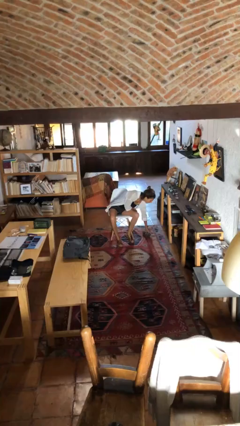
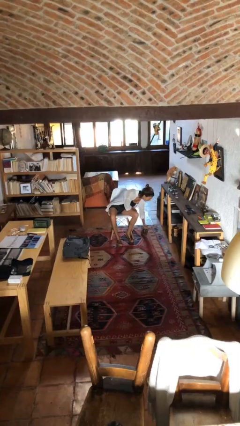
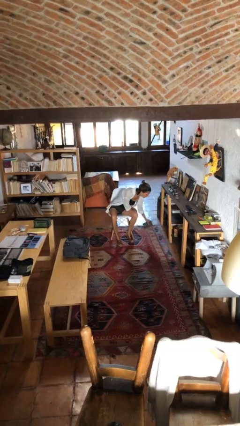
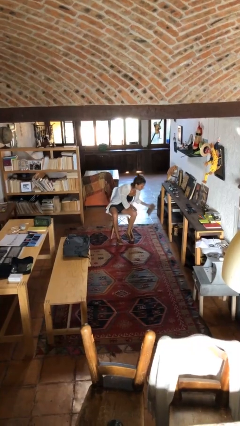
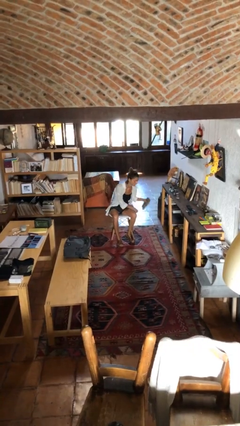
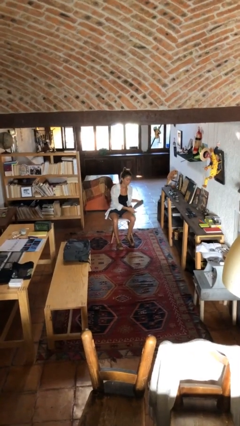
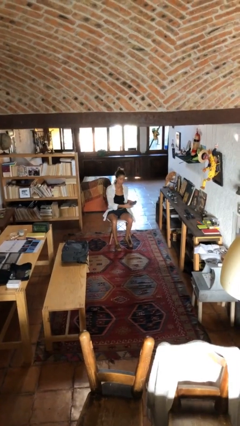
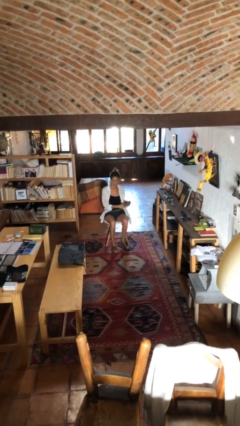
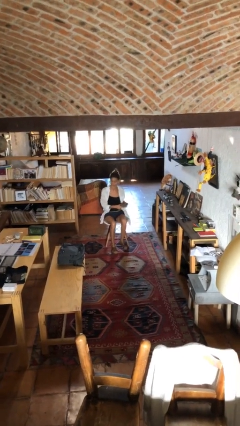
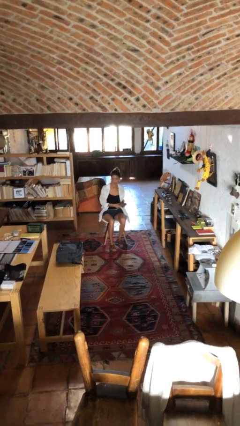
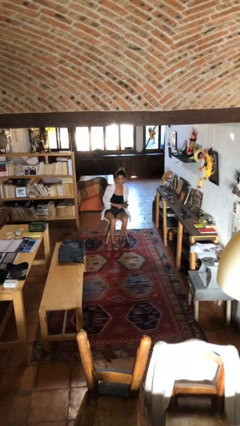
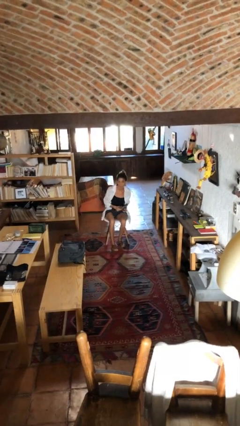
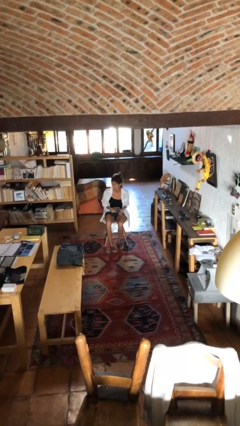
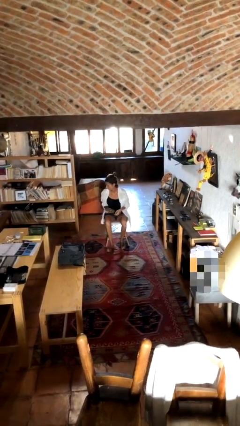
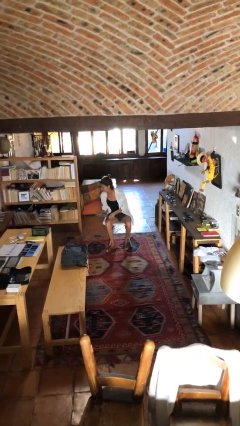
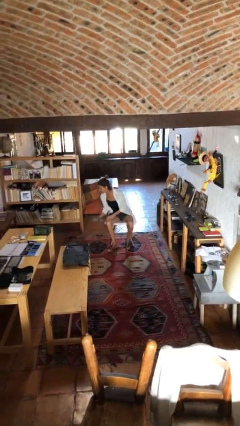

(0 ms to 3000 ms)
person picks up object from floor

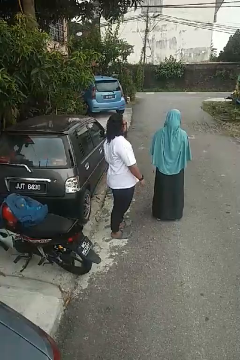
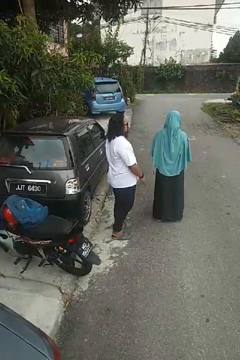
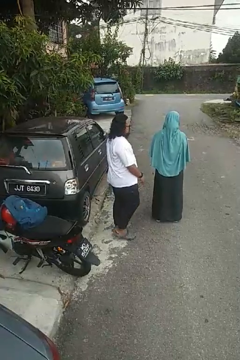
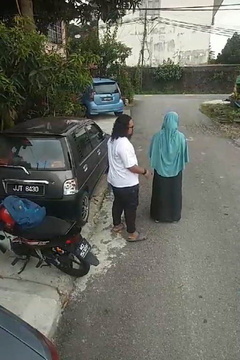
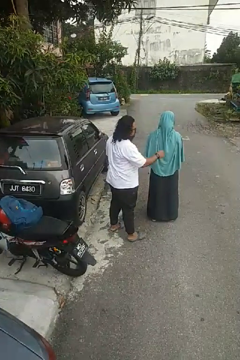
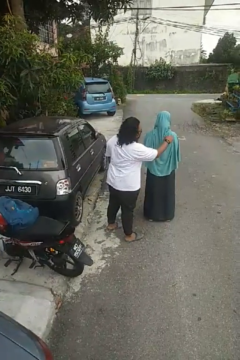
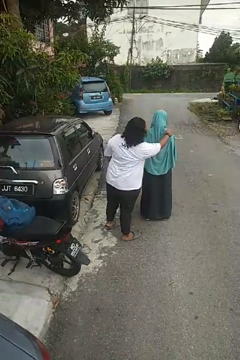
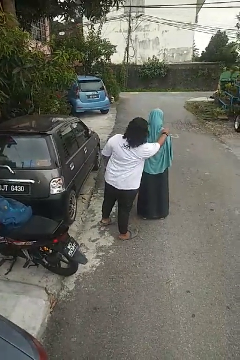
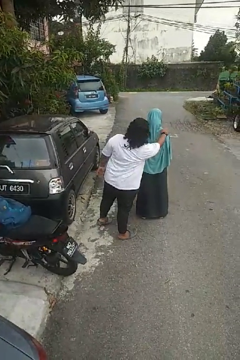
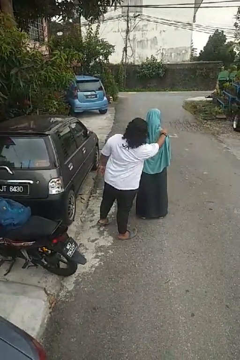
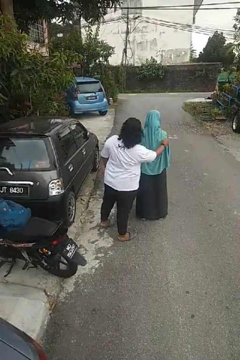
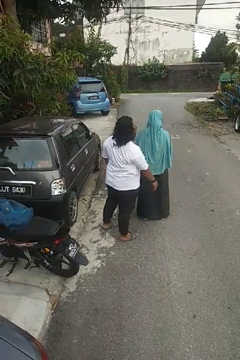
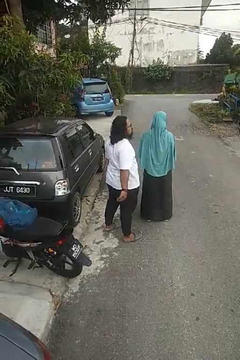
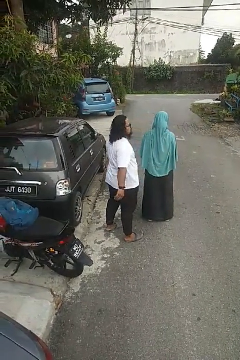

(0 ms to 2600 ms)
person touches back of person

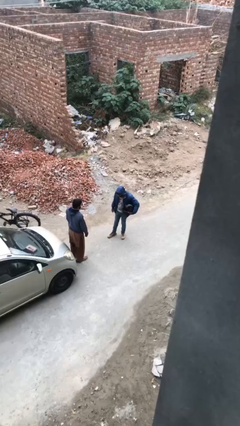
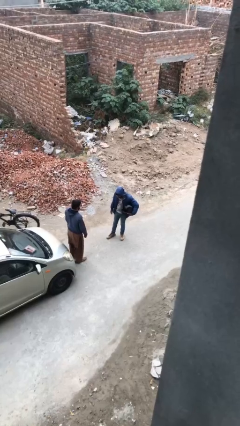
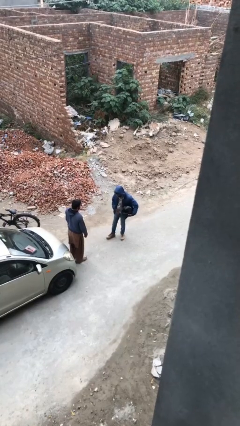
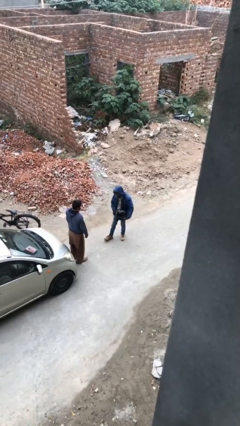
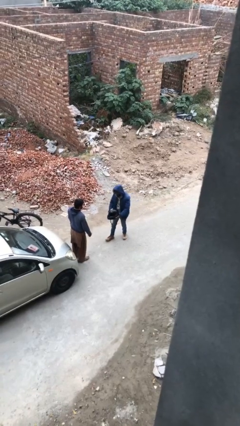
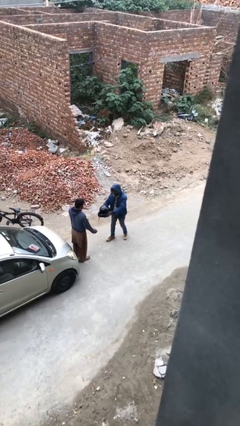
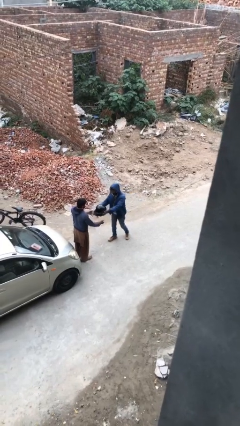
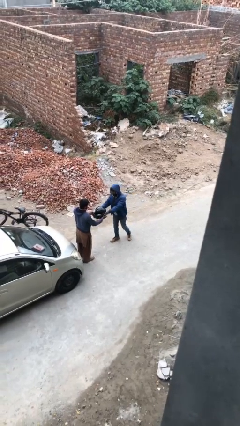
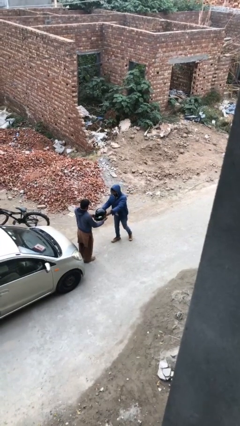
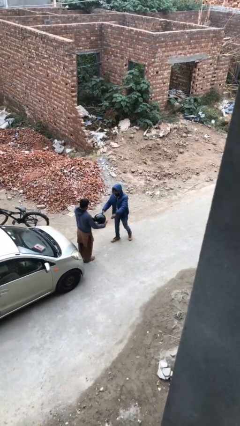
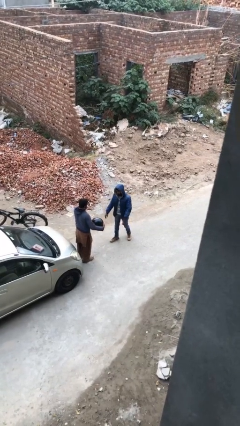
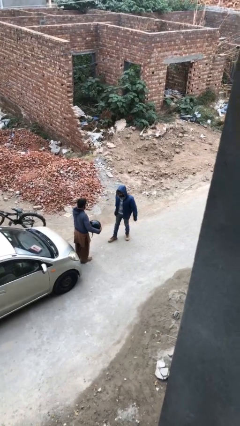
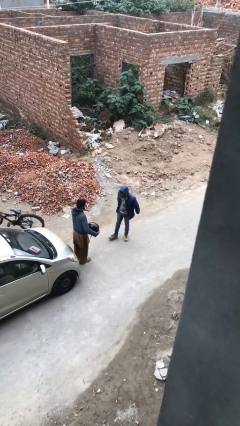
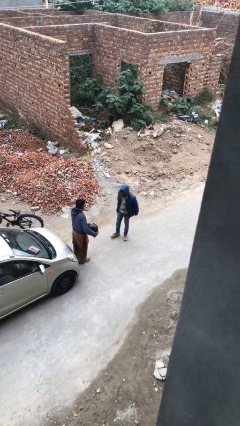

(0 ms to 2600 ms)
person transfers object to person

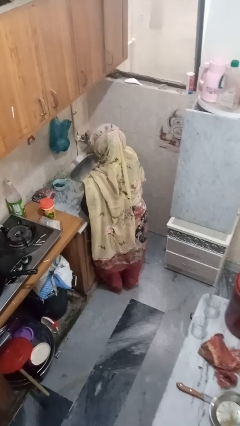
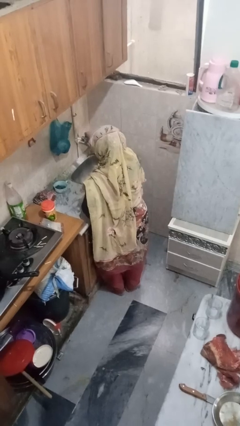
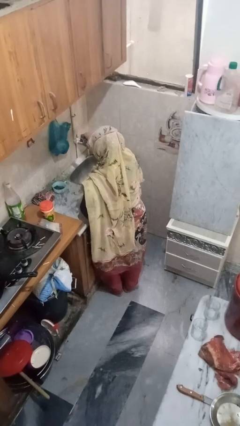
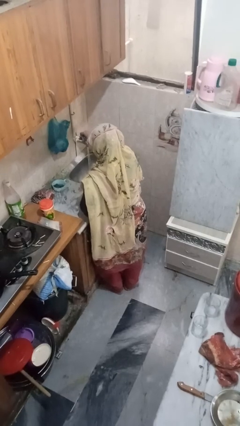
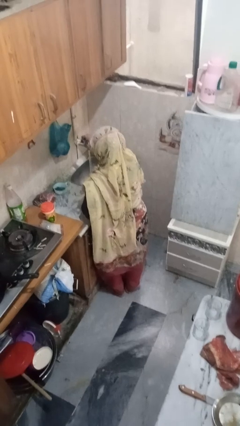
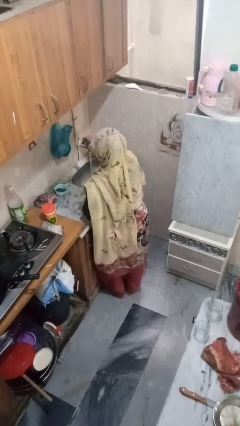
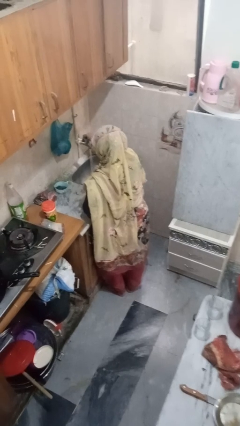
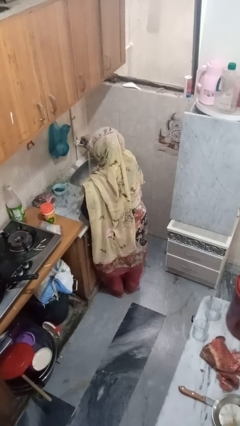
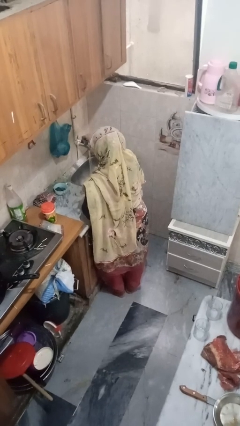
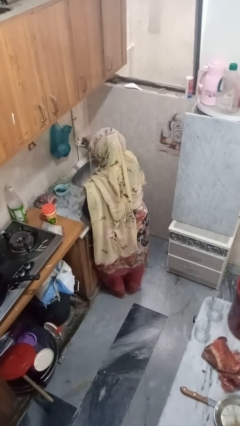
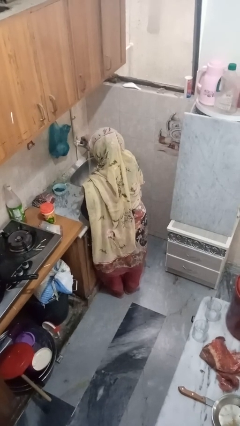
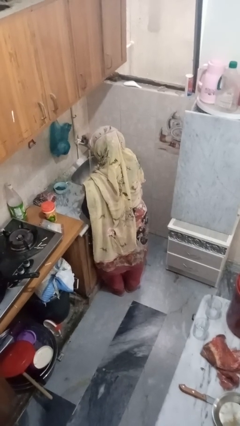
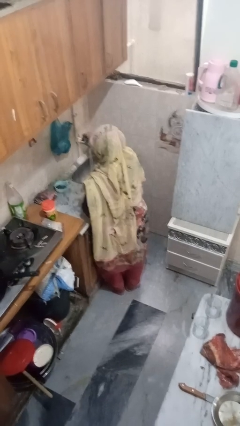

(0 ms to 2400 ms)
person turns on faucet

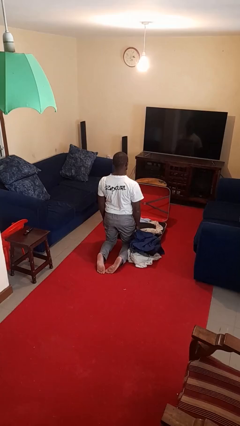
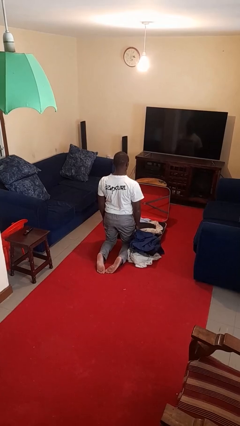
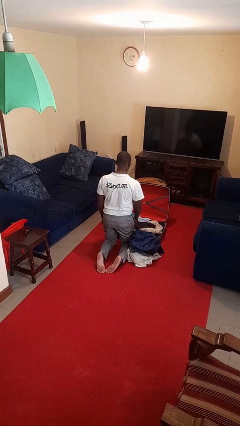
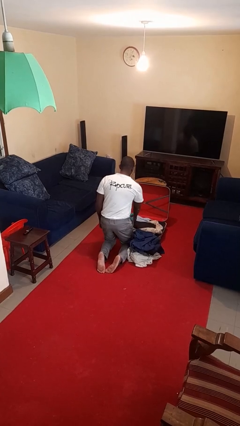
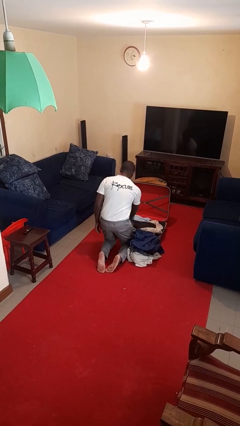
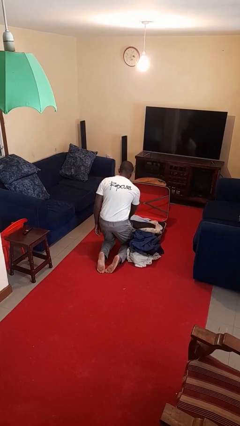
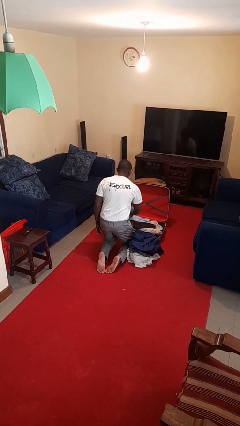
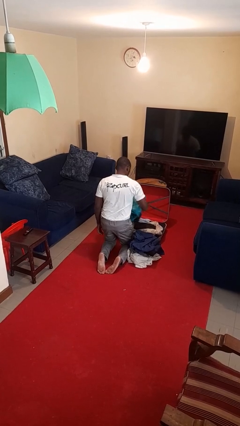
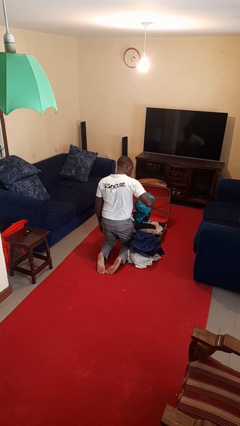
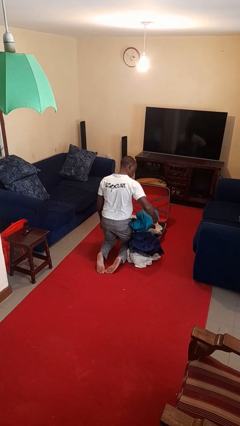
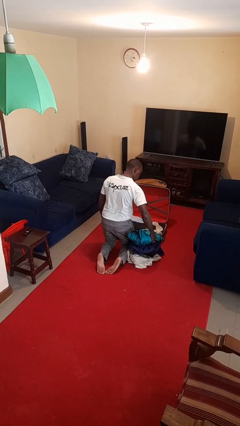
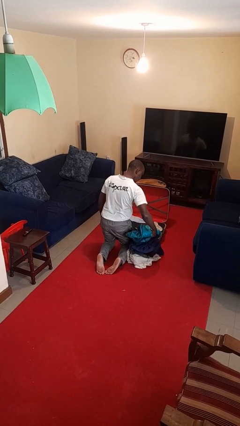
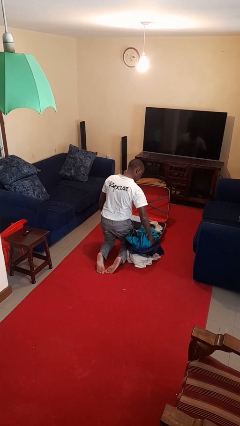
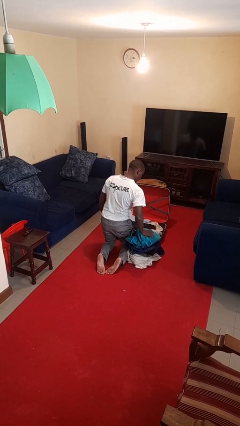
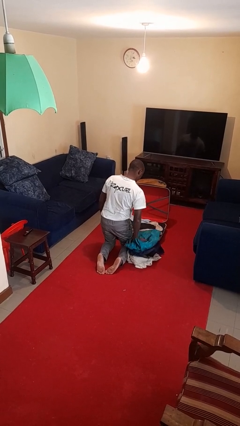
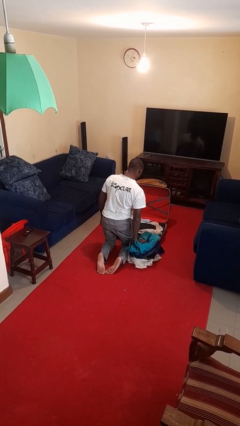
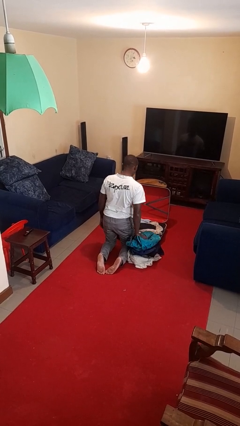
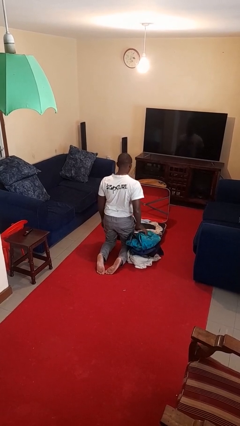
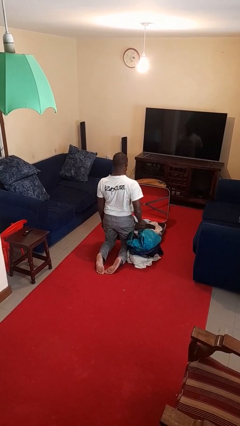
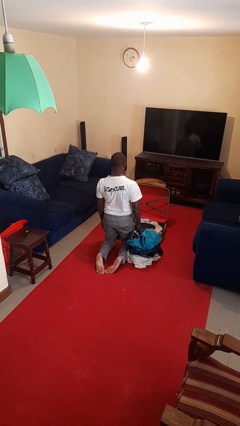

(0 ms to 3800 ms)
person unloads clothes from suitcase

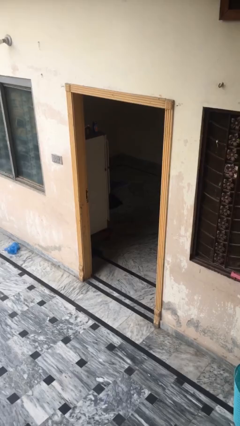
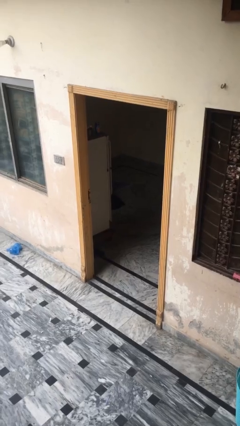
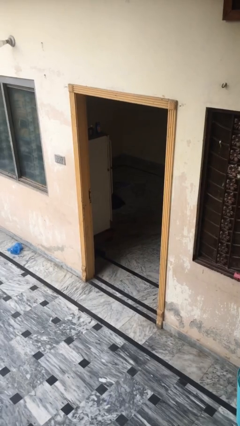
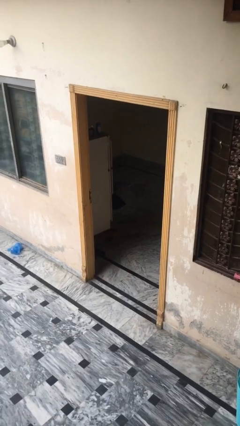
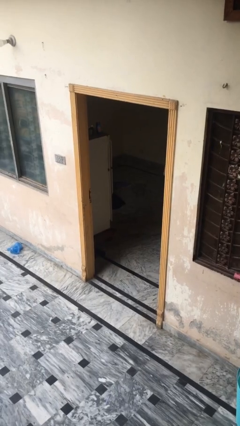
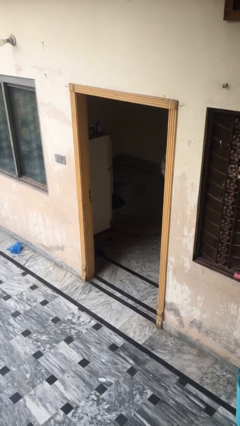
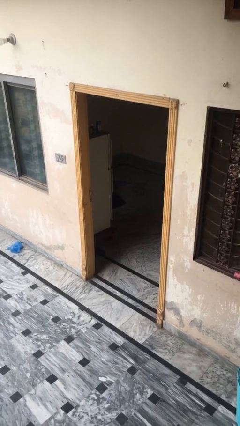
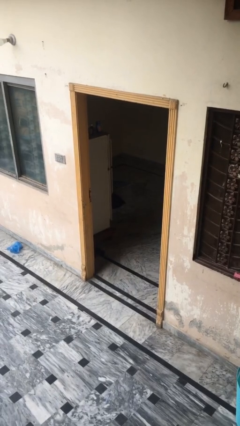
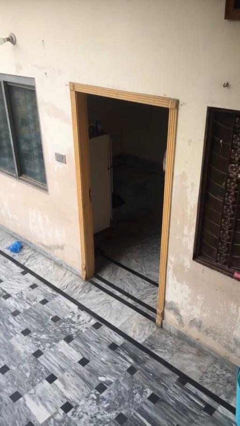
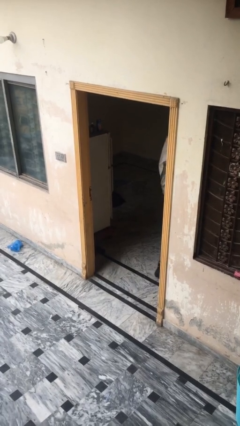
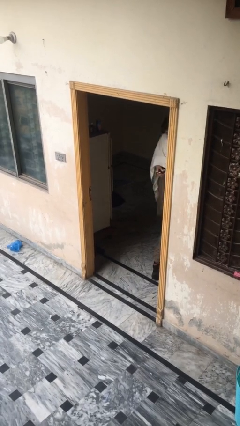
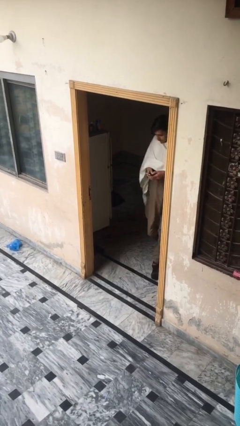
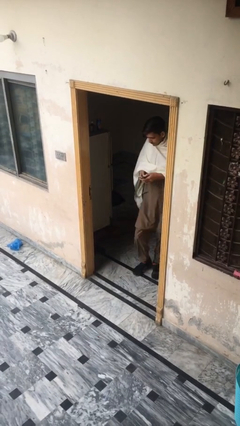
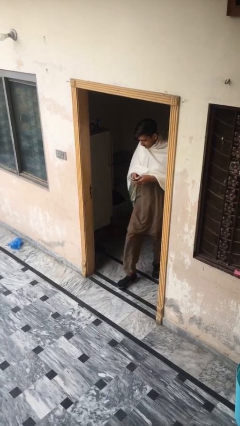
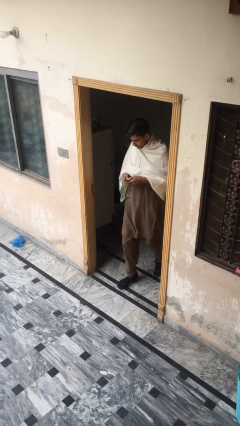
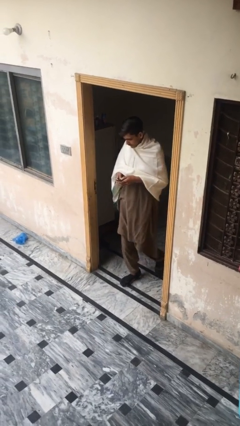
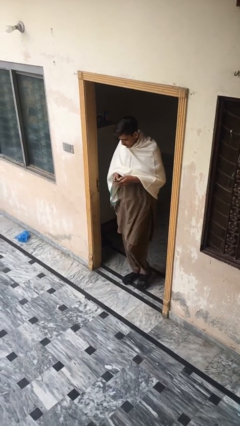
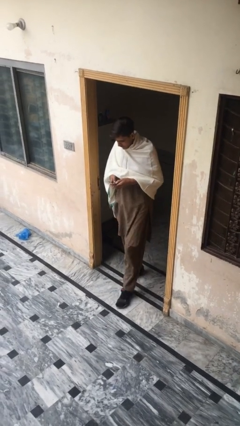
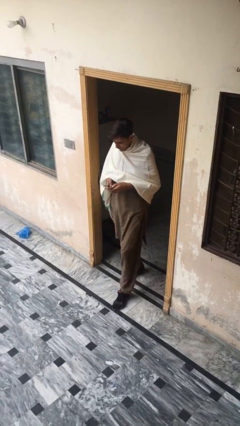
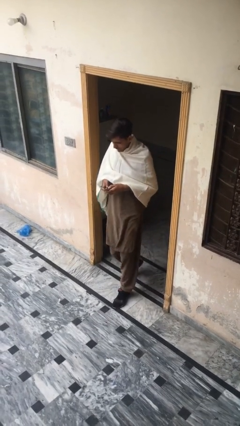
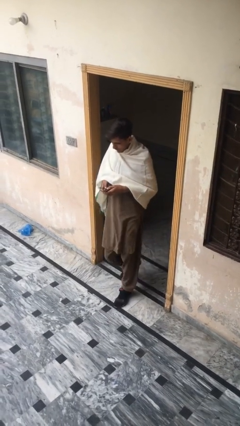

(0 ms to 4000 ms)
person enters scene through structure
